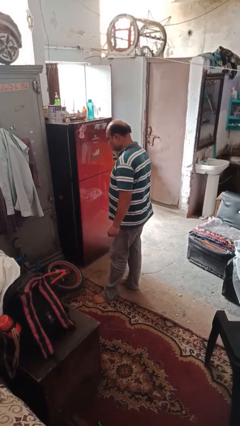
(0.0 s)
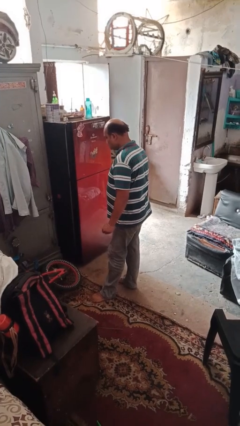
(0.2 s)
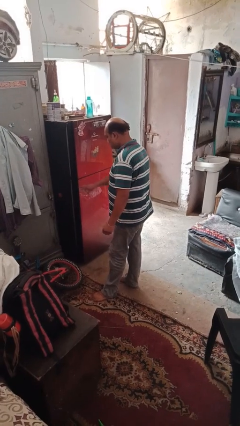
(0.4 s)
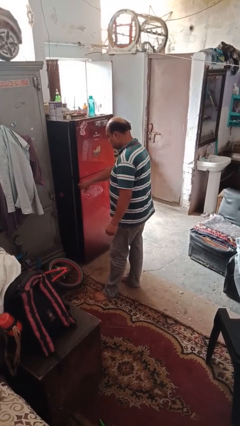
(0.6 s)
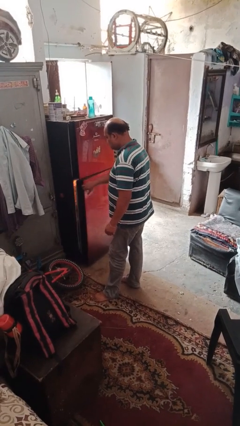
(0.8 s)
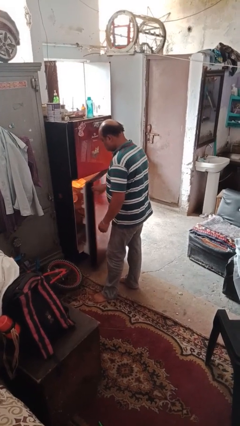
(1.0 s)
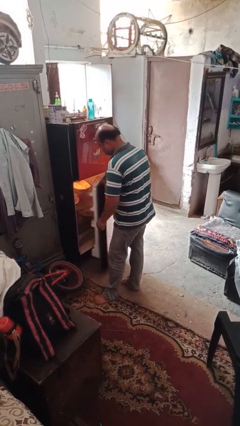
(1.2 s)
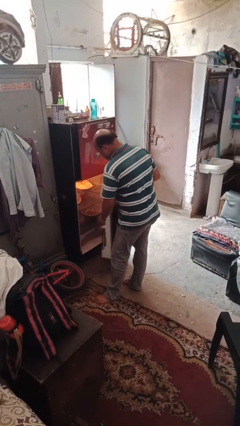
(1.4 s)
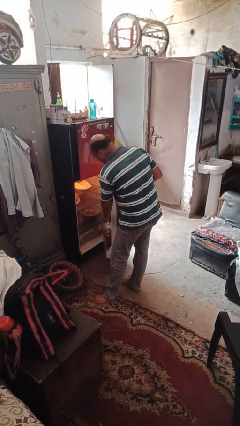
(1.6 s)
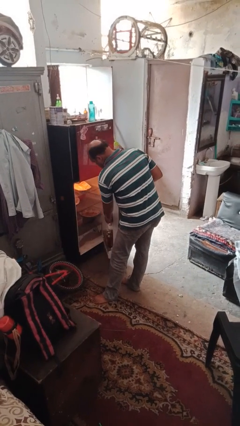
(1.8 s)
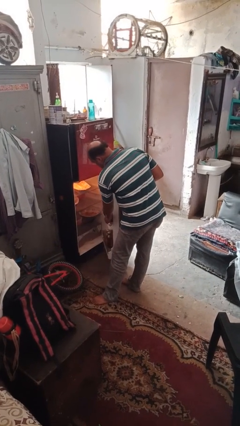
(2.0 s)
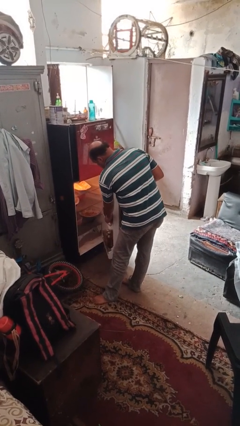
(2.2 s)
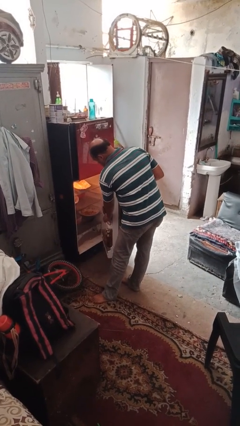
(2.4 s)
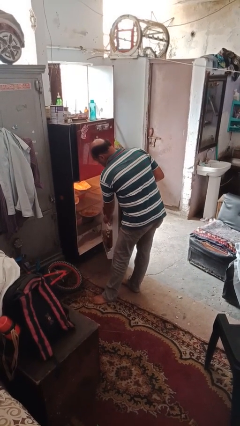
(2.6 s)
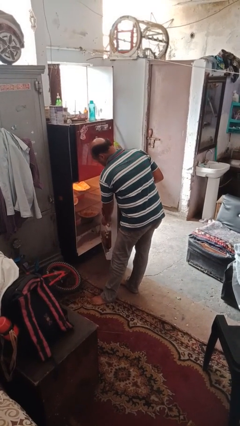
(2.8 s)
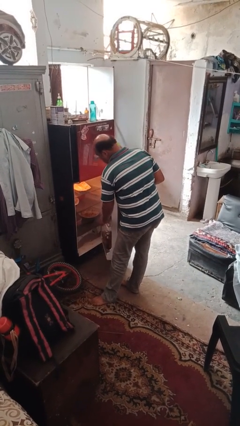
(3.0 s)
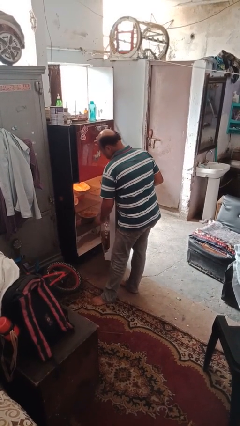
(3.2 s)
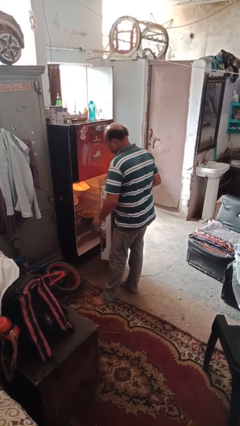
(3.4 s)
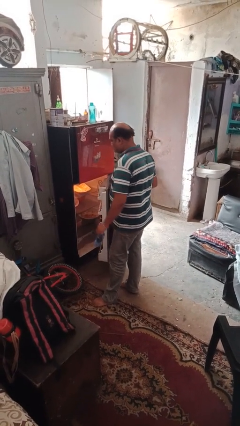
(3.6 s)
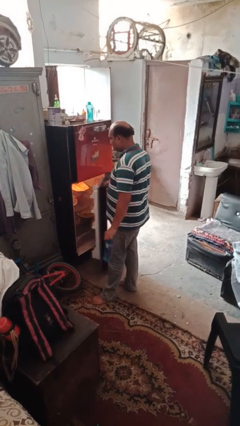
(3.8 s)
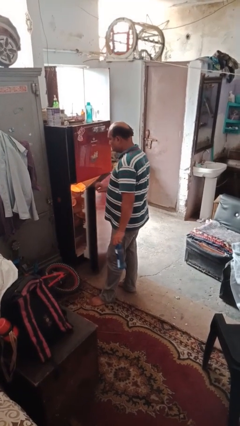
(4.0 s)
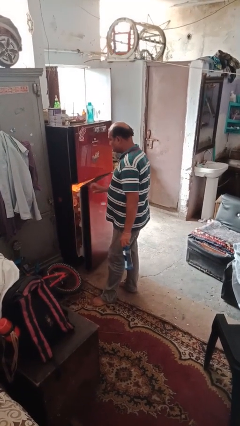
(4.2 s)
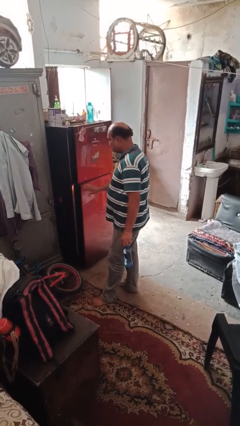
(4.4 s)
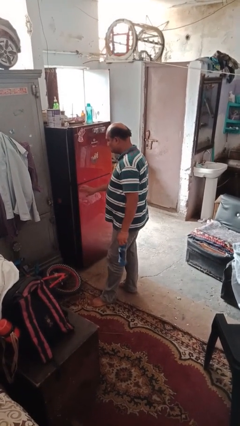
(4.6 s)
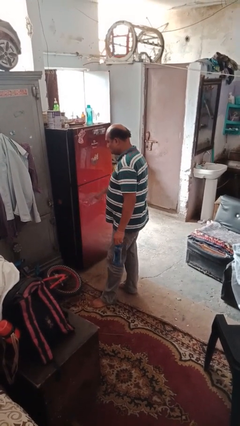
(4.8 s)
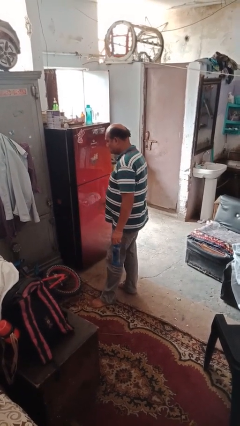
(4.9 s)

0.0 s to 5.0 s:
person takes object from refrigerator

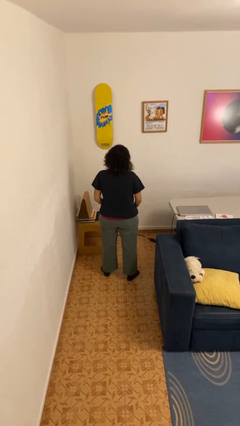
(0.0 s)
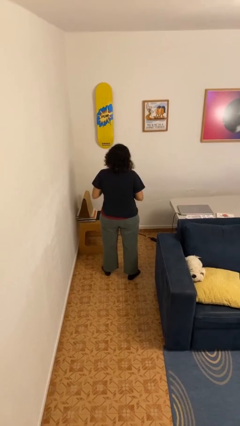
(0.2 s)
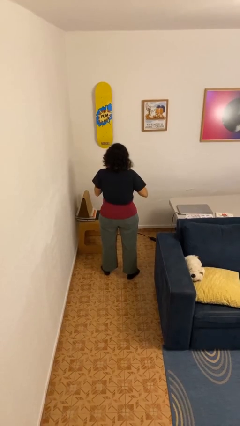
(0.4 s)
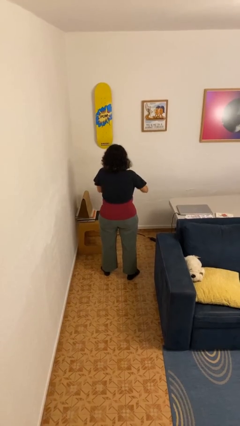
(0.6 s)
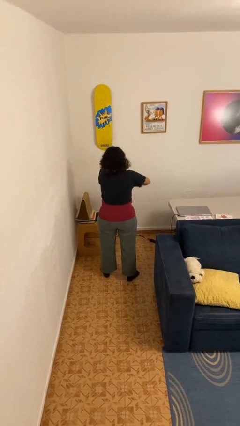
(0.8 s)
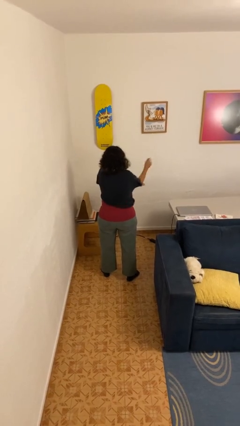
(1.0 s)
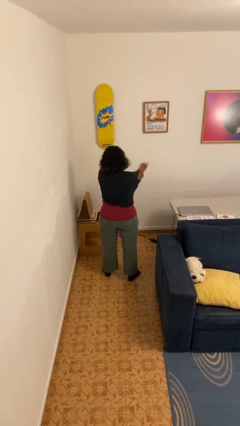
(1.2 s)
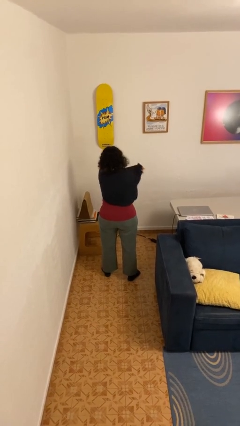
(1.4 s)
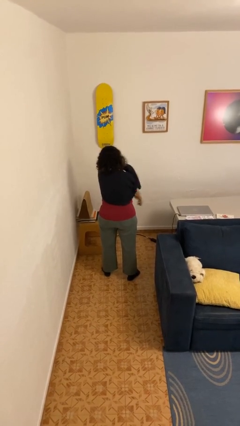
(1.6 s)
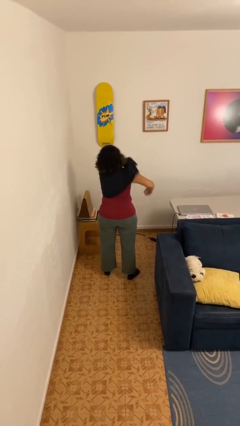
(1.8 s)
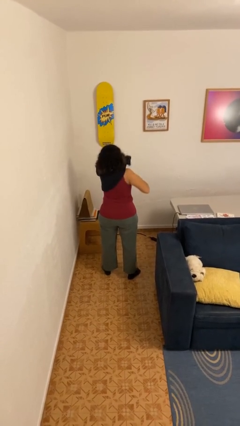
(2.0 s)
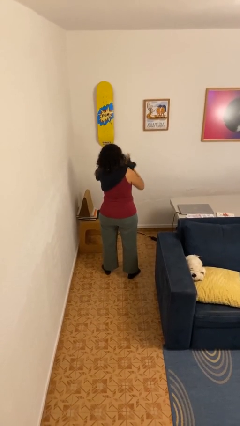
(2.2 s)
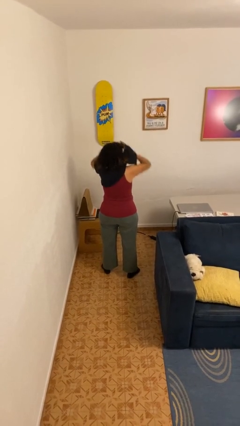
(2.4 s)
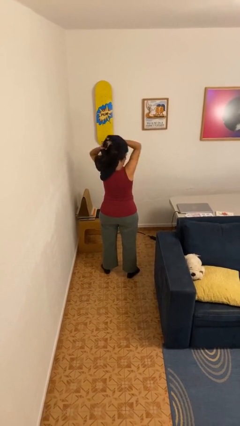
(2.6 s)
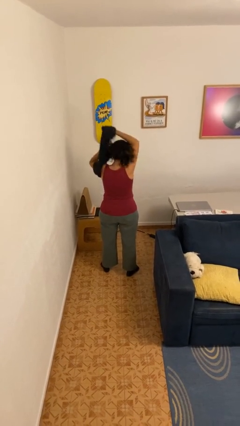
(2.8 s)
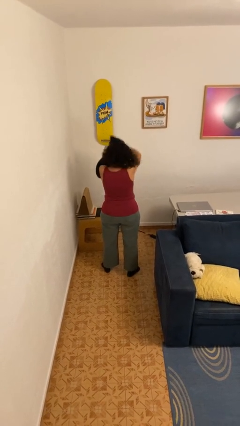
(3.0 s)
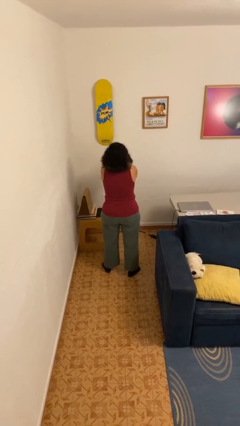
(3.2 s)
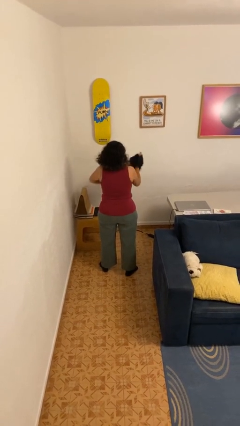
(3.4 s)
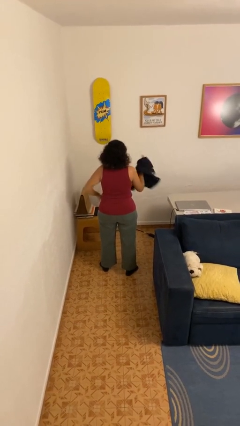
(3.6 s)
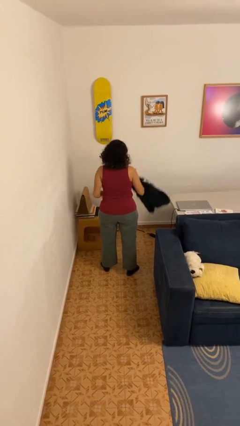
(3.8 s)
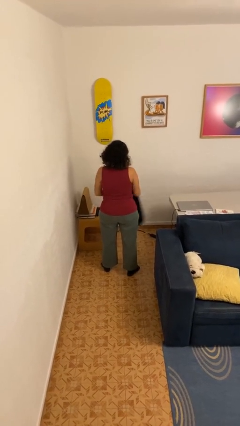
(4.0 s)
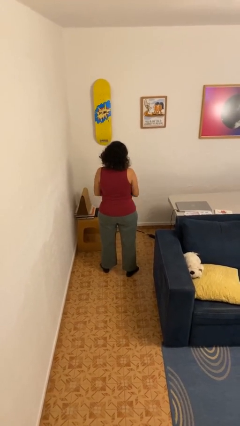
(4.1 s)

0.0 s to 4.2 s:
person takes off shirt

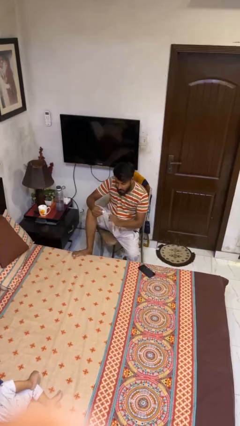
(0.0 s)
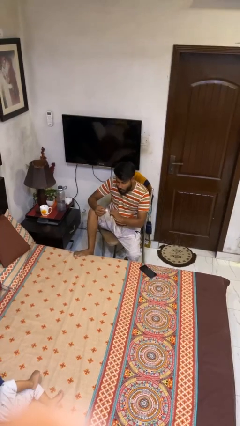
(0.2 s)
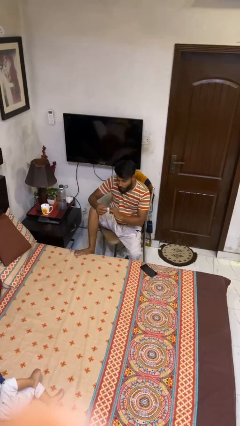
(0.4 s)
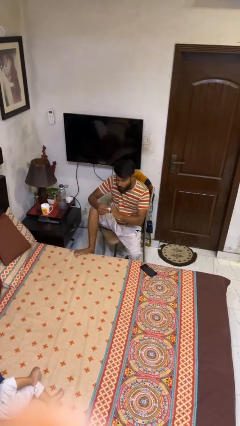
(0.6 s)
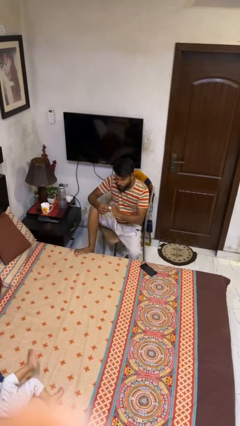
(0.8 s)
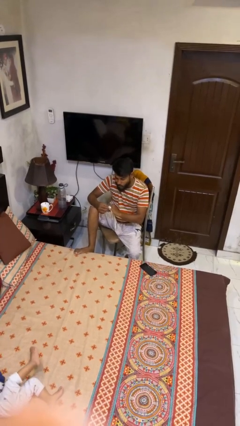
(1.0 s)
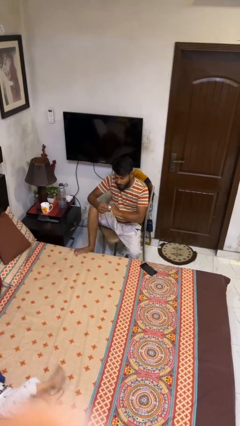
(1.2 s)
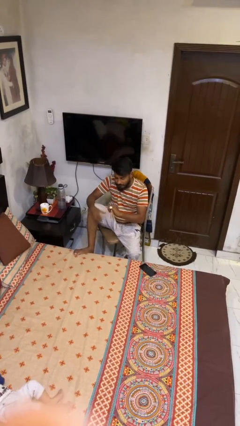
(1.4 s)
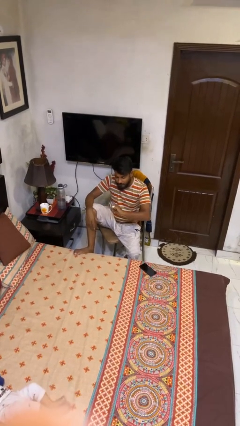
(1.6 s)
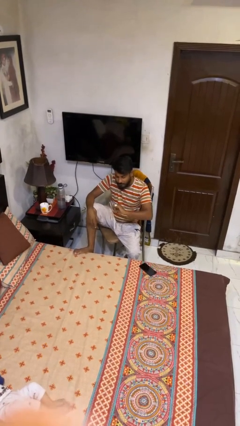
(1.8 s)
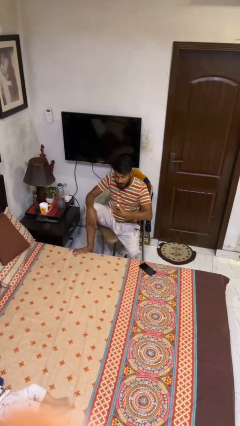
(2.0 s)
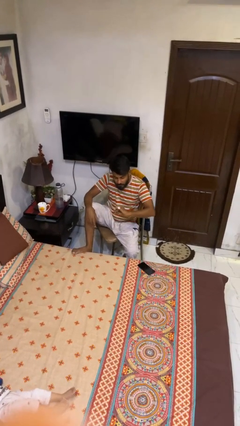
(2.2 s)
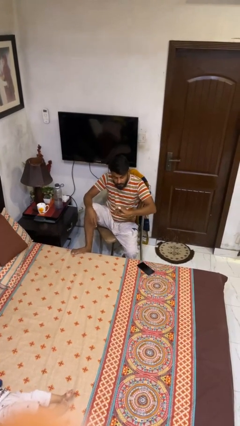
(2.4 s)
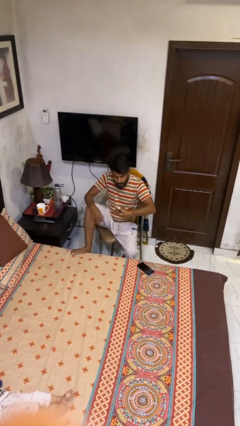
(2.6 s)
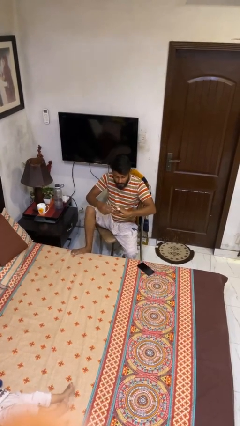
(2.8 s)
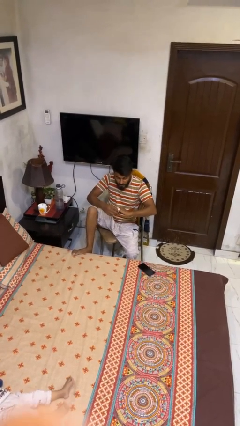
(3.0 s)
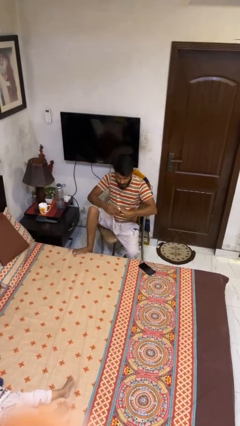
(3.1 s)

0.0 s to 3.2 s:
person puts on ring

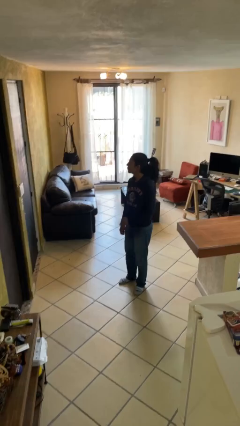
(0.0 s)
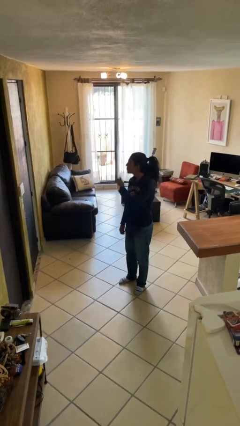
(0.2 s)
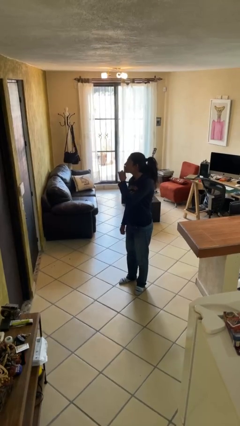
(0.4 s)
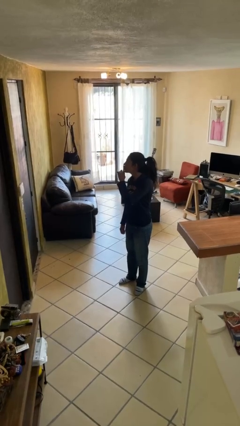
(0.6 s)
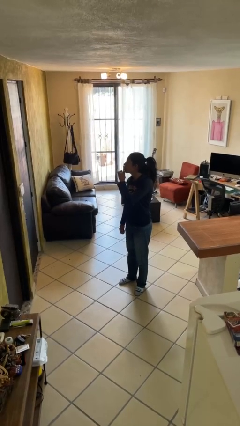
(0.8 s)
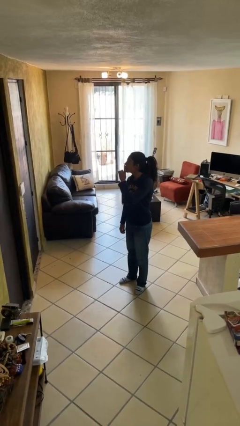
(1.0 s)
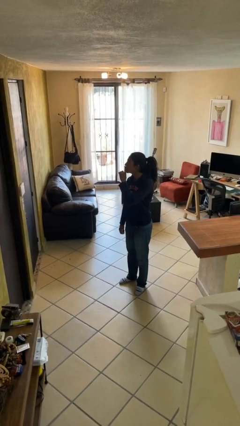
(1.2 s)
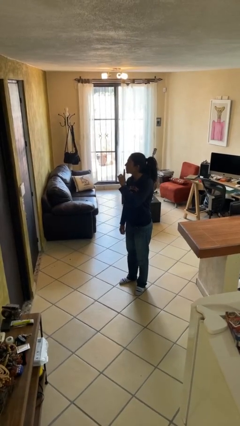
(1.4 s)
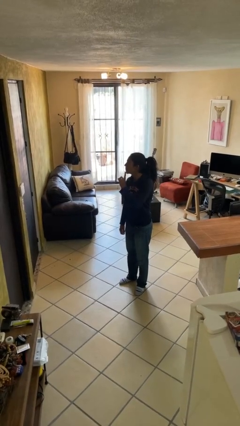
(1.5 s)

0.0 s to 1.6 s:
person gestures be quiet

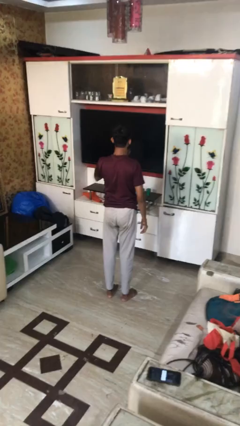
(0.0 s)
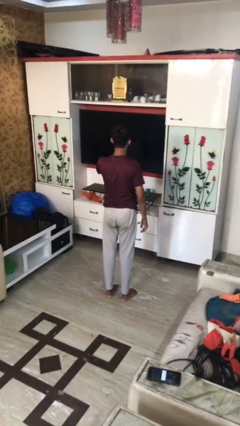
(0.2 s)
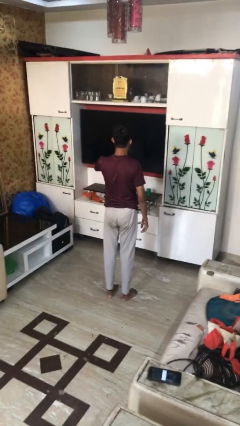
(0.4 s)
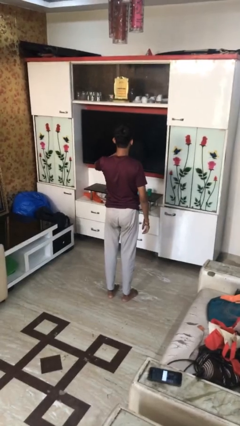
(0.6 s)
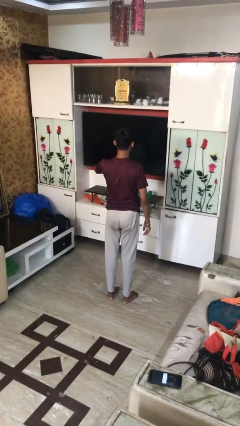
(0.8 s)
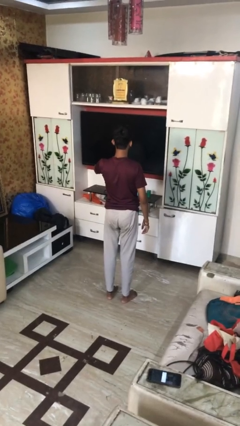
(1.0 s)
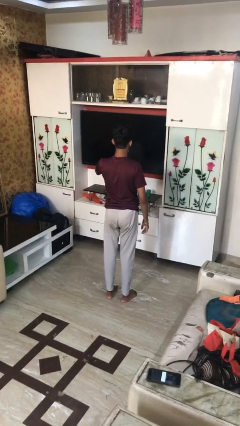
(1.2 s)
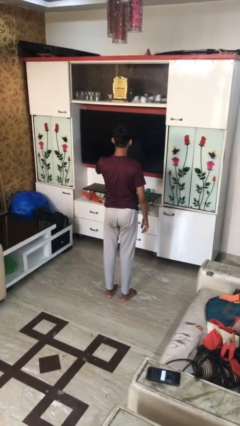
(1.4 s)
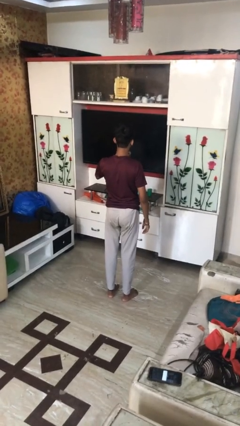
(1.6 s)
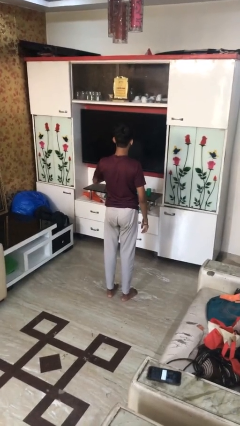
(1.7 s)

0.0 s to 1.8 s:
person strokes chin

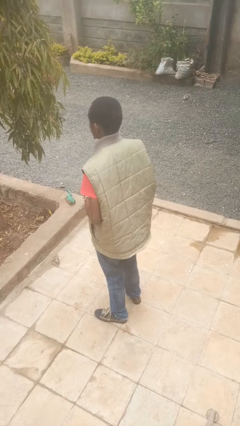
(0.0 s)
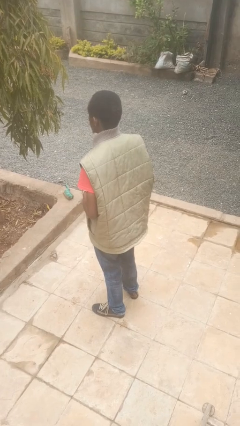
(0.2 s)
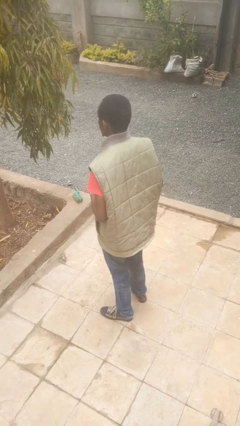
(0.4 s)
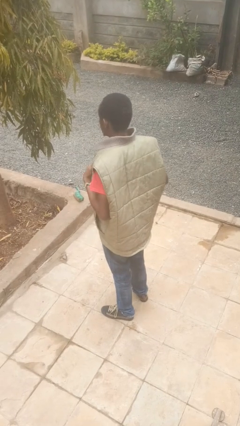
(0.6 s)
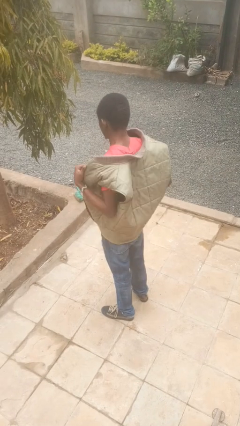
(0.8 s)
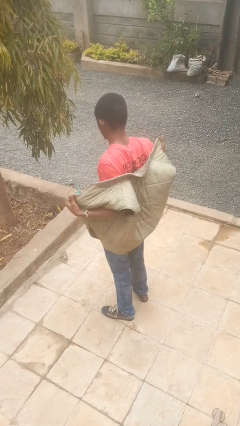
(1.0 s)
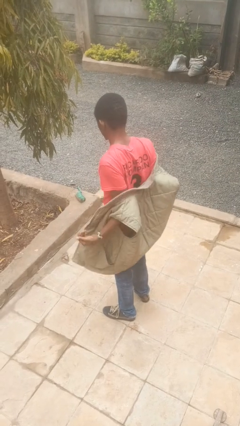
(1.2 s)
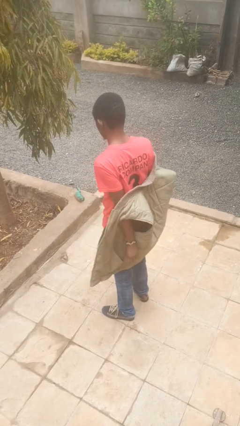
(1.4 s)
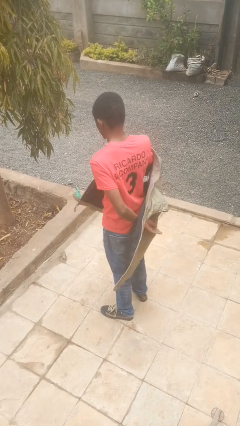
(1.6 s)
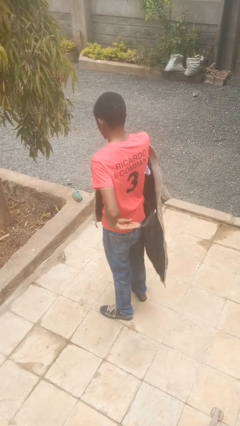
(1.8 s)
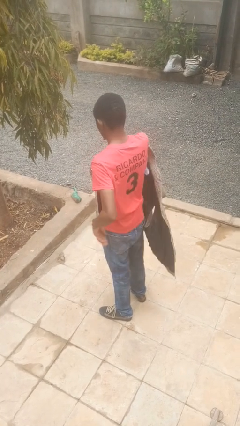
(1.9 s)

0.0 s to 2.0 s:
person takes off jacket
